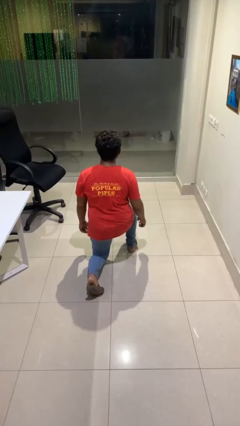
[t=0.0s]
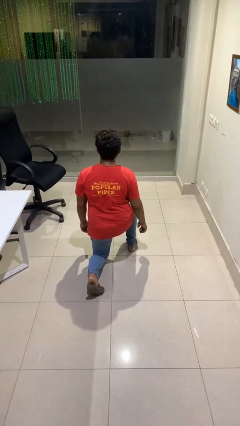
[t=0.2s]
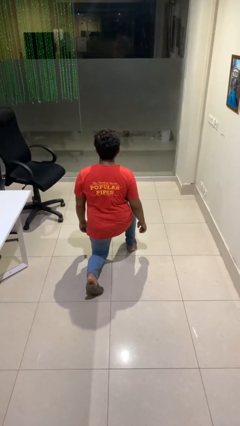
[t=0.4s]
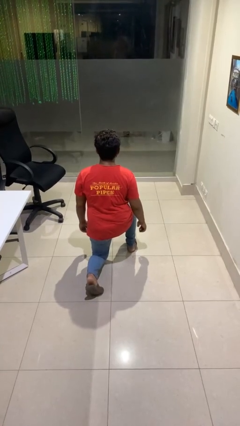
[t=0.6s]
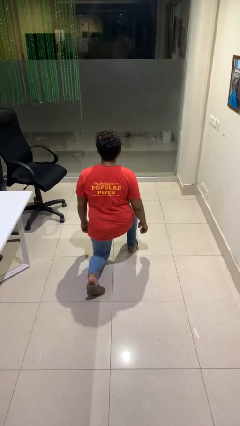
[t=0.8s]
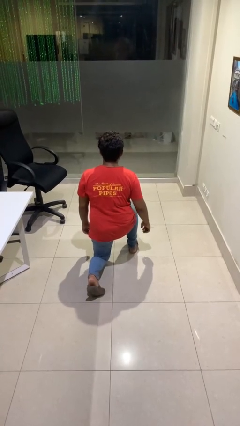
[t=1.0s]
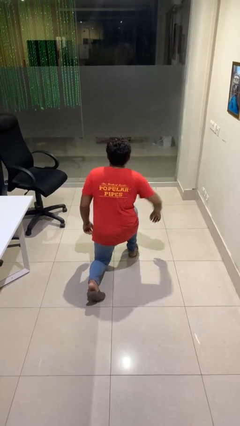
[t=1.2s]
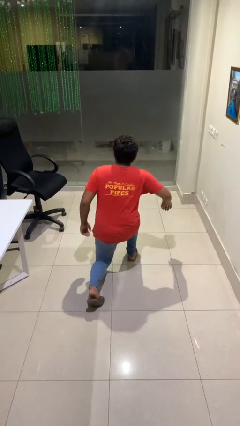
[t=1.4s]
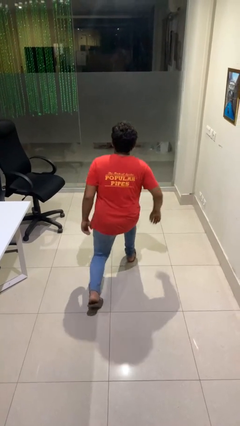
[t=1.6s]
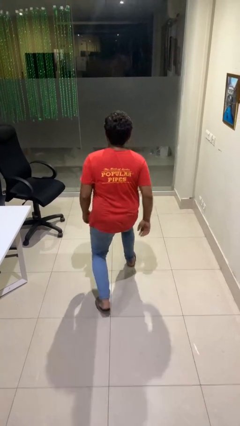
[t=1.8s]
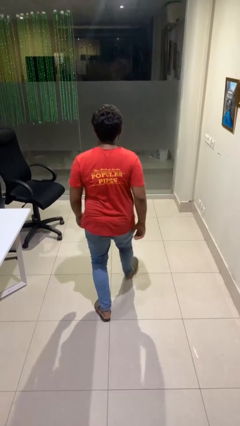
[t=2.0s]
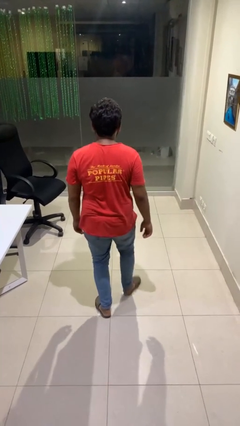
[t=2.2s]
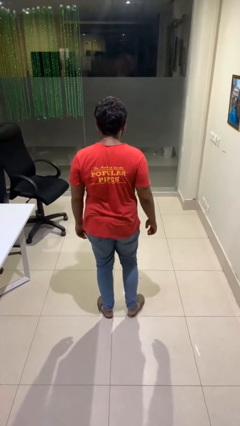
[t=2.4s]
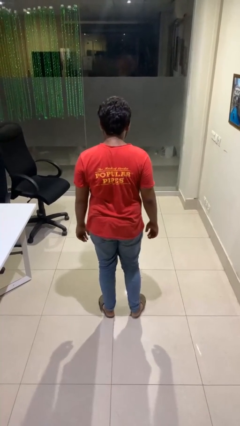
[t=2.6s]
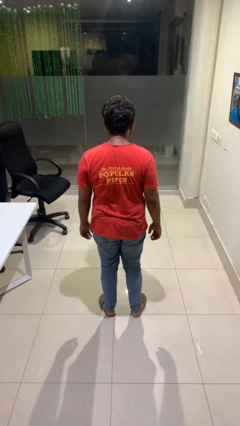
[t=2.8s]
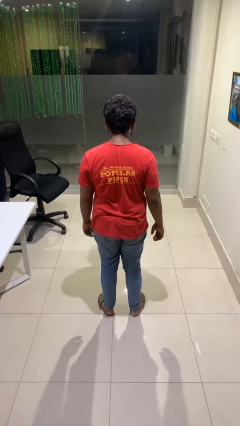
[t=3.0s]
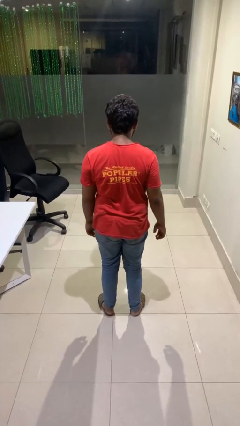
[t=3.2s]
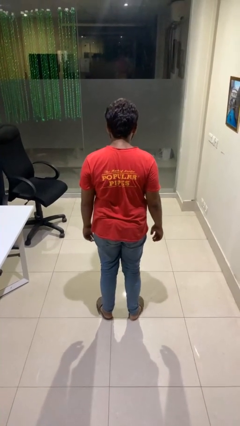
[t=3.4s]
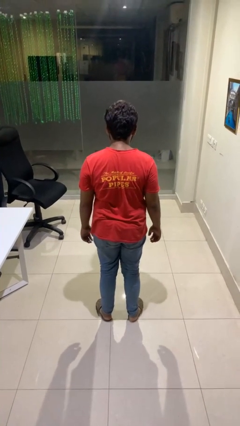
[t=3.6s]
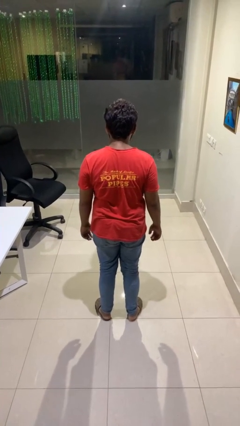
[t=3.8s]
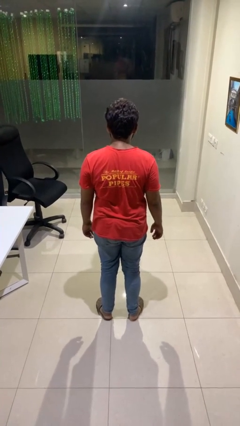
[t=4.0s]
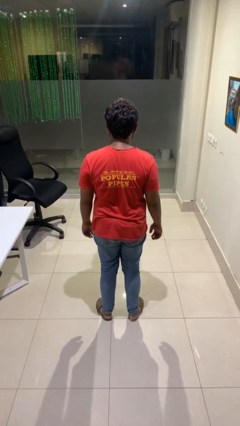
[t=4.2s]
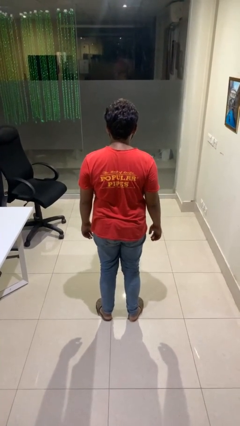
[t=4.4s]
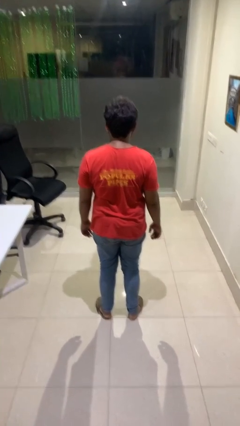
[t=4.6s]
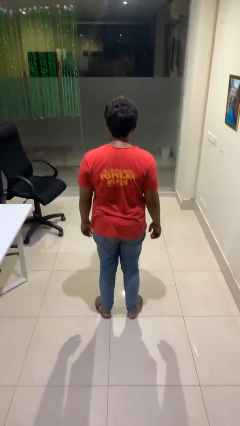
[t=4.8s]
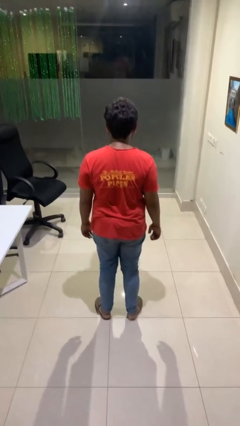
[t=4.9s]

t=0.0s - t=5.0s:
person stands up from floor

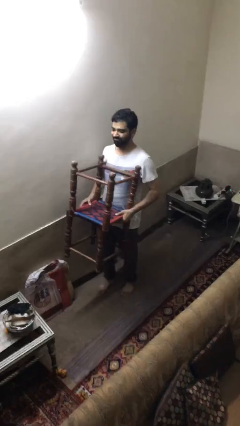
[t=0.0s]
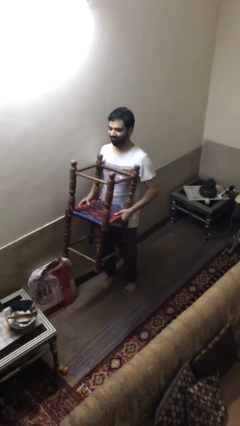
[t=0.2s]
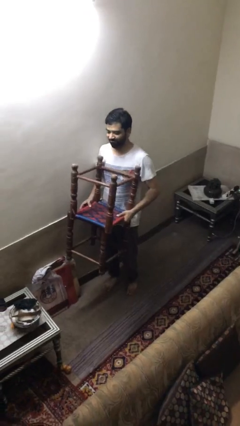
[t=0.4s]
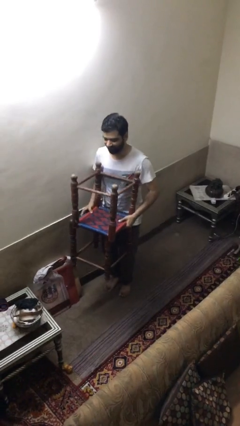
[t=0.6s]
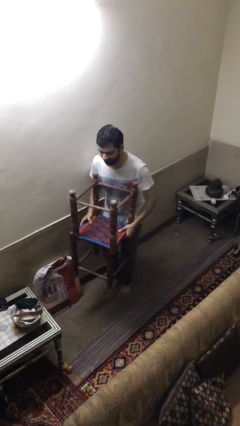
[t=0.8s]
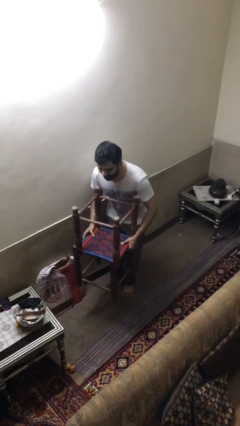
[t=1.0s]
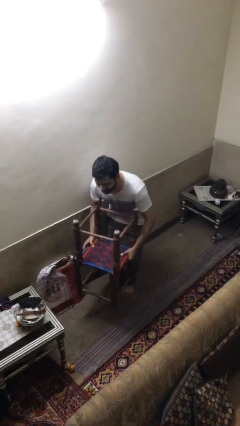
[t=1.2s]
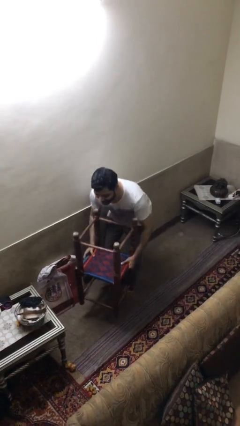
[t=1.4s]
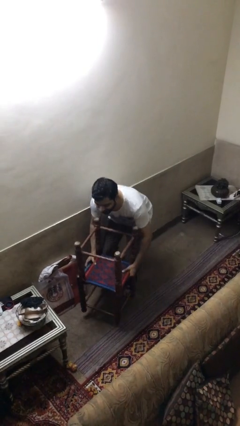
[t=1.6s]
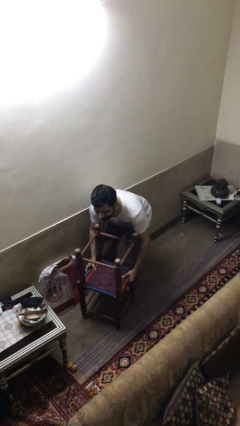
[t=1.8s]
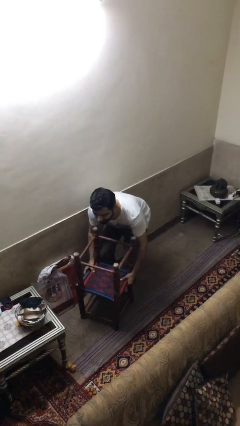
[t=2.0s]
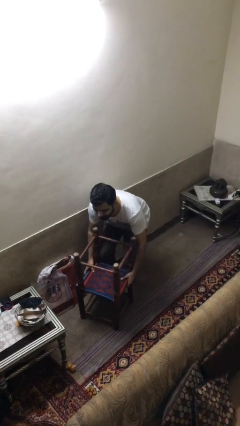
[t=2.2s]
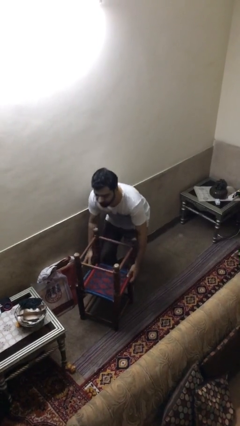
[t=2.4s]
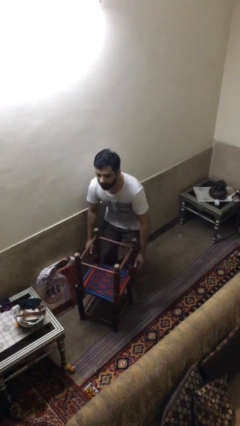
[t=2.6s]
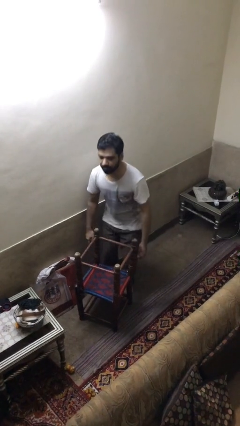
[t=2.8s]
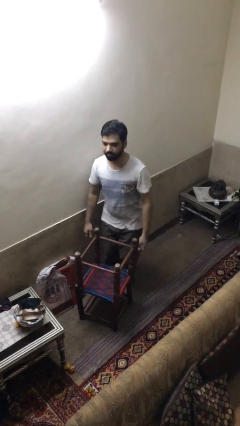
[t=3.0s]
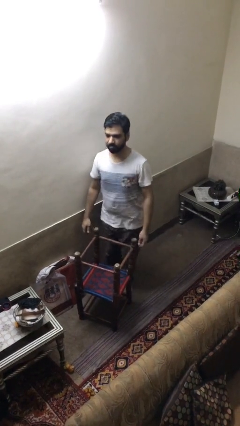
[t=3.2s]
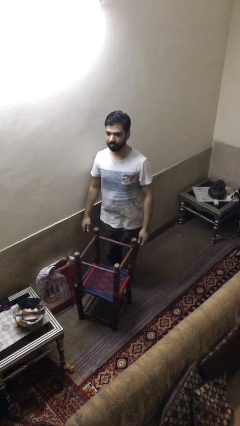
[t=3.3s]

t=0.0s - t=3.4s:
person puts down object on floor

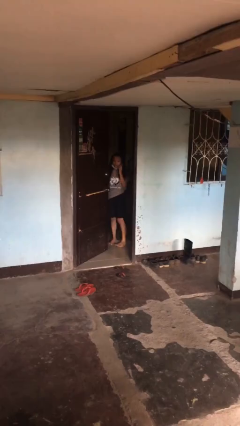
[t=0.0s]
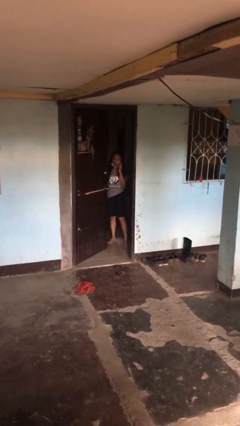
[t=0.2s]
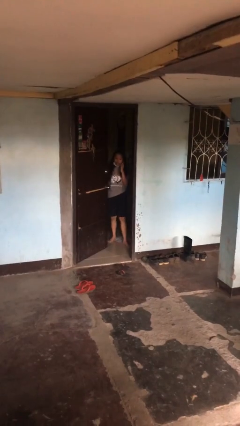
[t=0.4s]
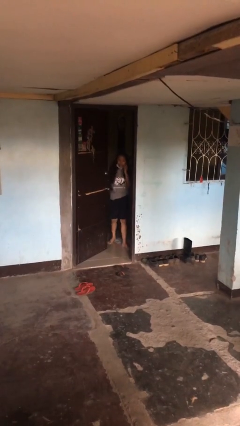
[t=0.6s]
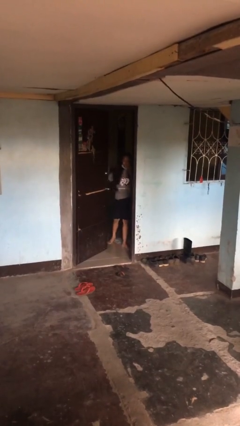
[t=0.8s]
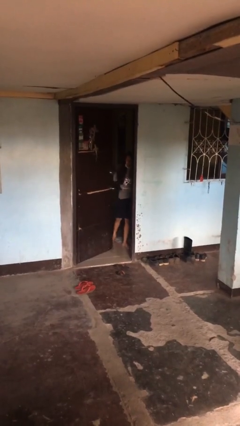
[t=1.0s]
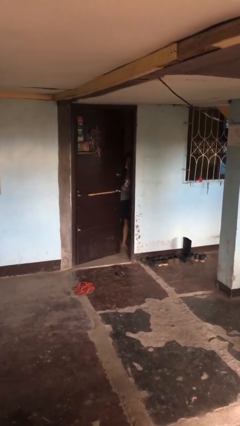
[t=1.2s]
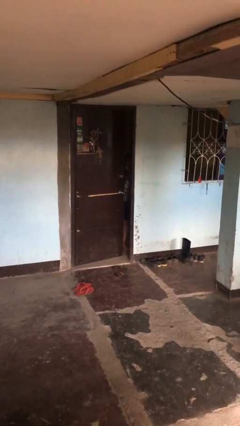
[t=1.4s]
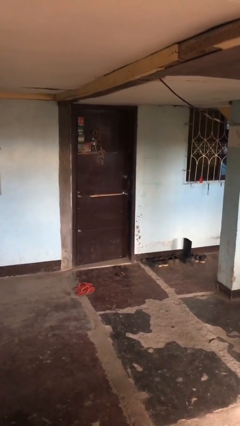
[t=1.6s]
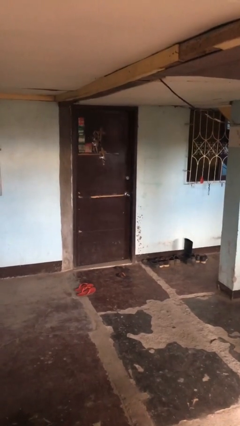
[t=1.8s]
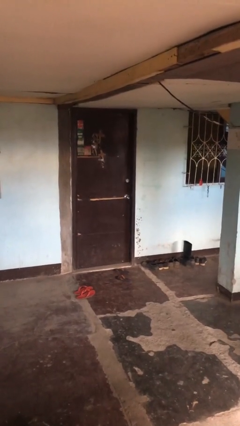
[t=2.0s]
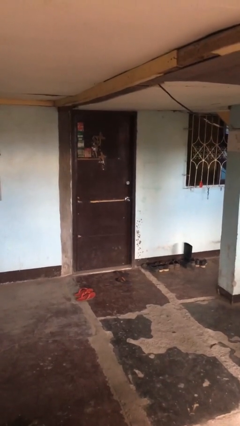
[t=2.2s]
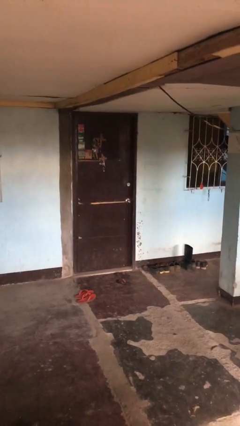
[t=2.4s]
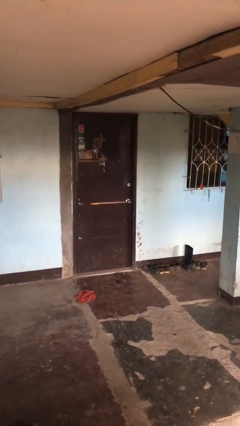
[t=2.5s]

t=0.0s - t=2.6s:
person closes facility door

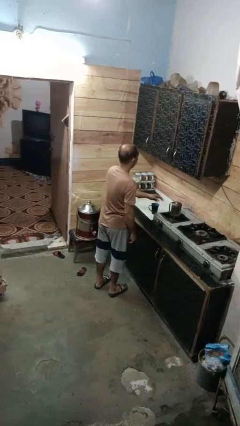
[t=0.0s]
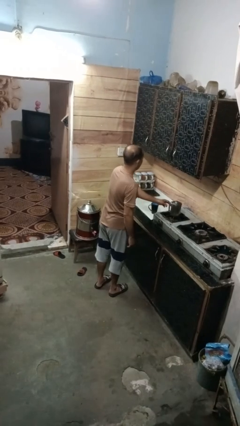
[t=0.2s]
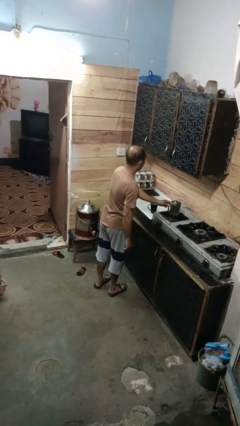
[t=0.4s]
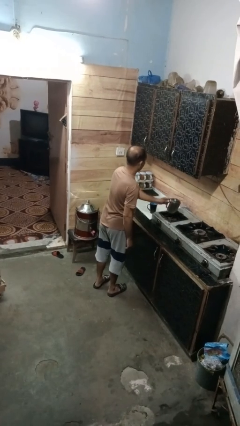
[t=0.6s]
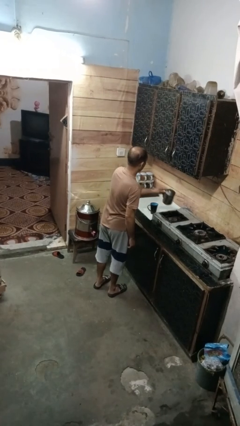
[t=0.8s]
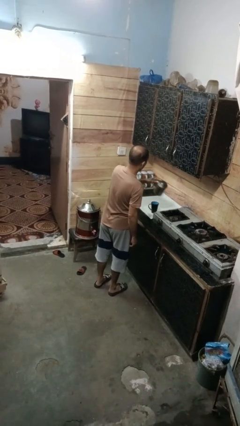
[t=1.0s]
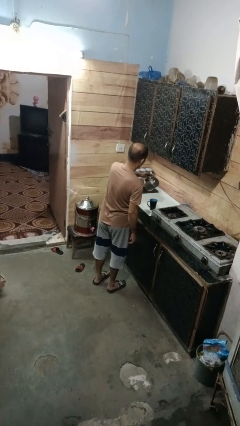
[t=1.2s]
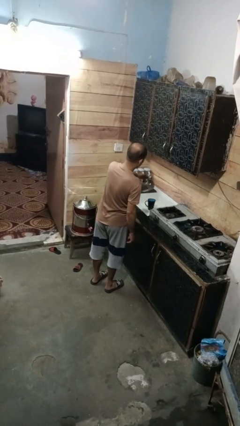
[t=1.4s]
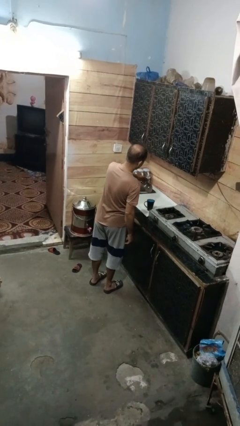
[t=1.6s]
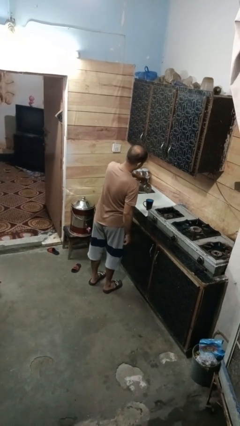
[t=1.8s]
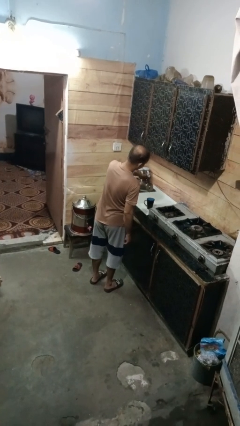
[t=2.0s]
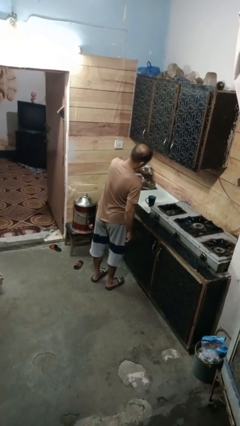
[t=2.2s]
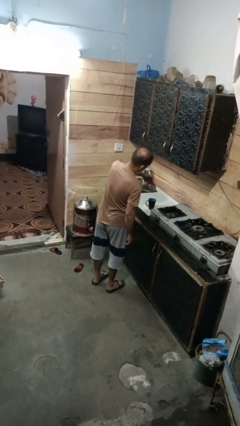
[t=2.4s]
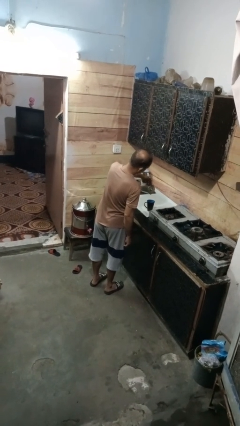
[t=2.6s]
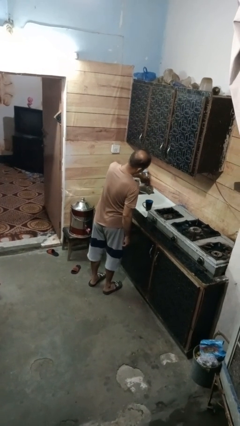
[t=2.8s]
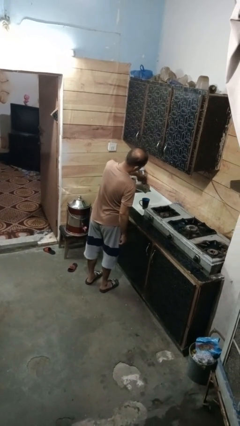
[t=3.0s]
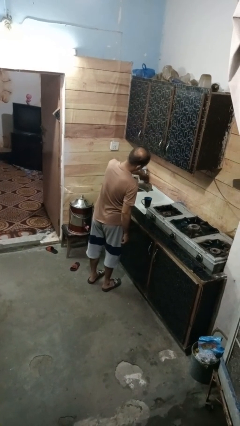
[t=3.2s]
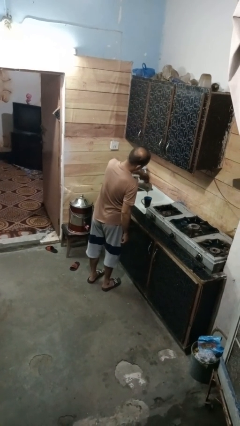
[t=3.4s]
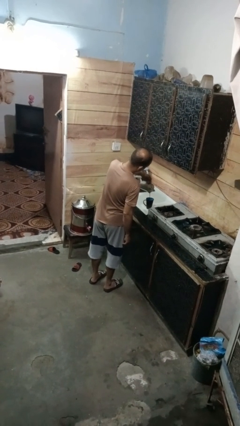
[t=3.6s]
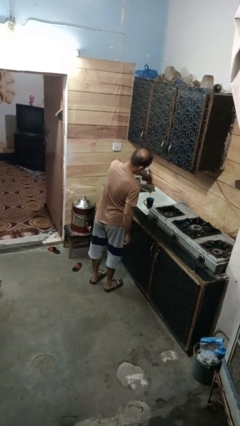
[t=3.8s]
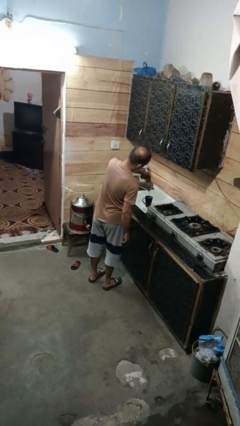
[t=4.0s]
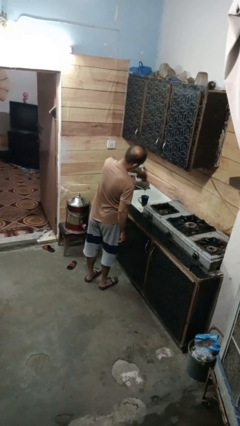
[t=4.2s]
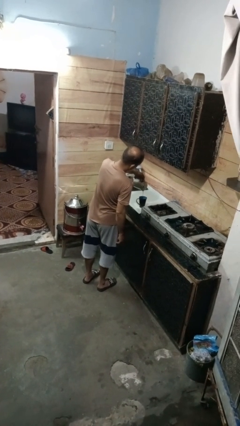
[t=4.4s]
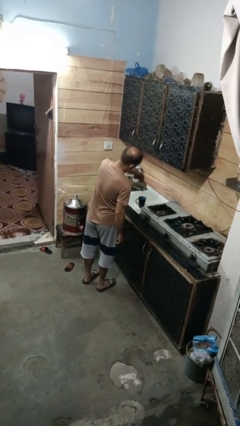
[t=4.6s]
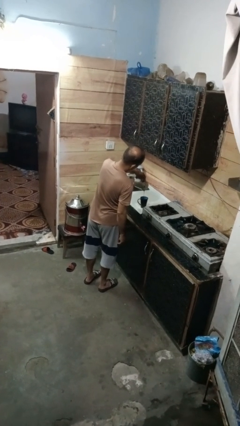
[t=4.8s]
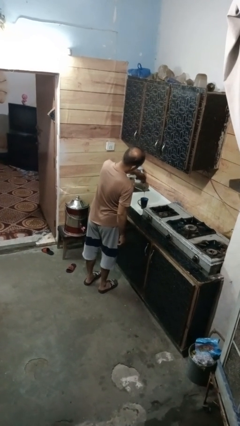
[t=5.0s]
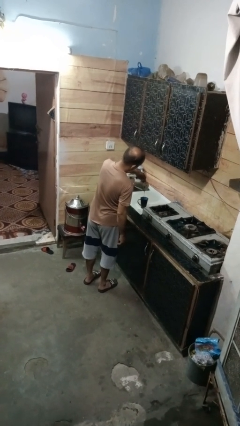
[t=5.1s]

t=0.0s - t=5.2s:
person pours coffee into mug

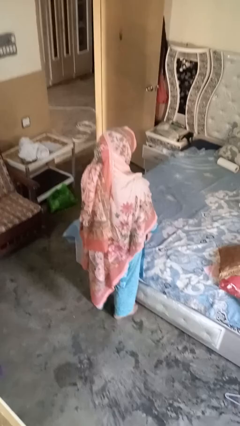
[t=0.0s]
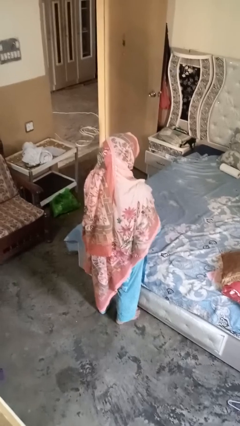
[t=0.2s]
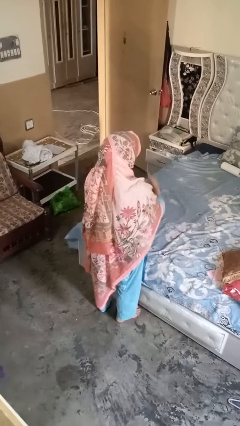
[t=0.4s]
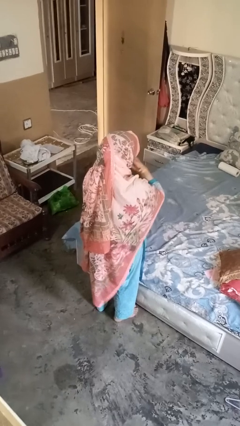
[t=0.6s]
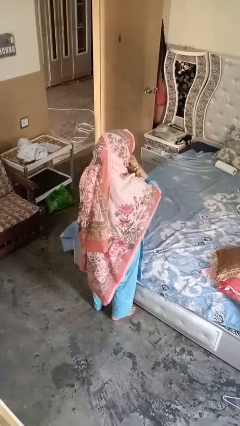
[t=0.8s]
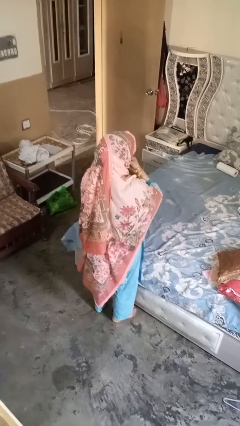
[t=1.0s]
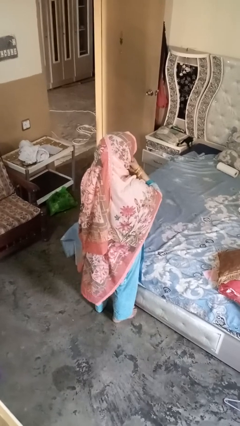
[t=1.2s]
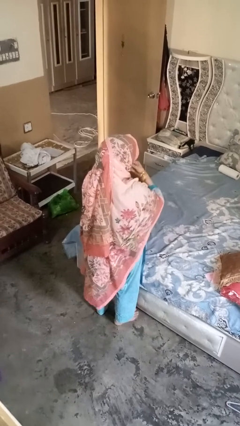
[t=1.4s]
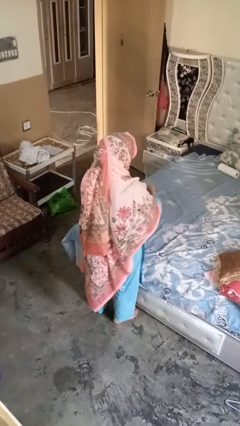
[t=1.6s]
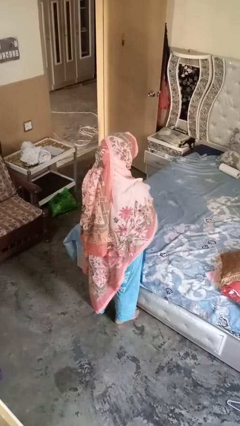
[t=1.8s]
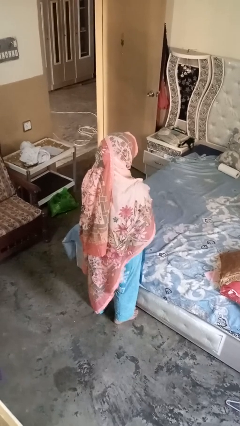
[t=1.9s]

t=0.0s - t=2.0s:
person strokes chin
